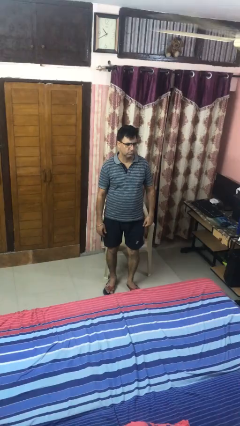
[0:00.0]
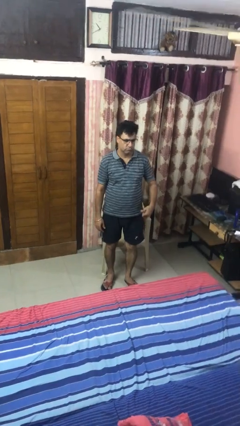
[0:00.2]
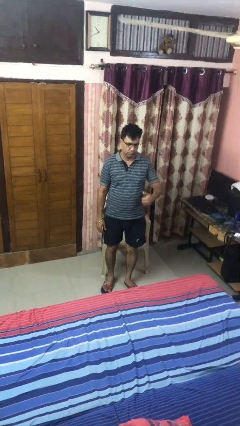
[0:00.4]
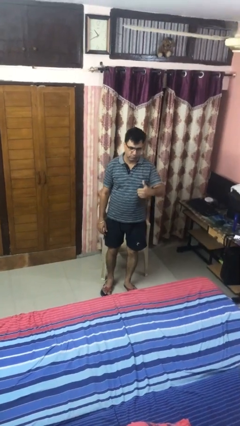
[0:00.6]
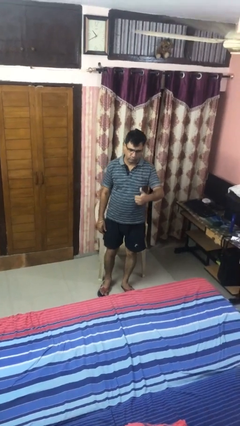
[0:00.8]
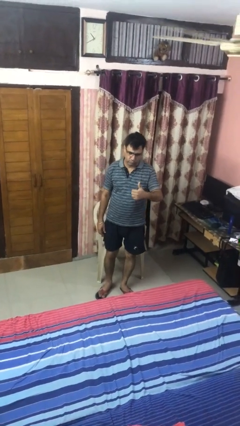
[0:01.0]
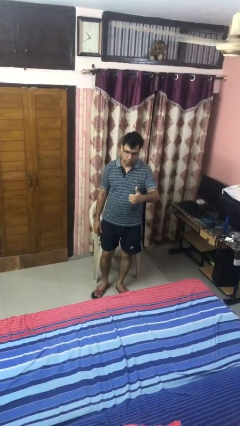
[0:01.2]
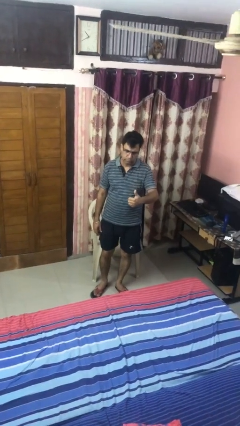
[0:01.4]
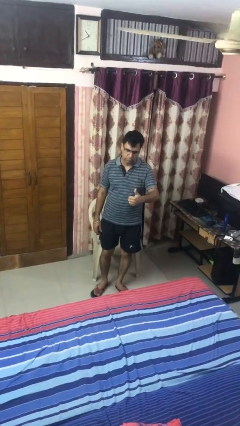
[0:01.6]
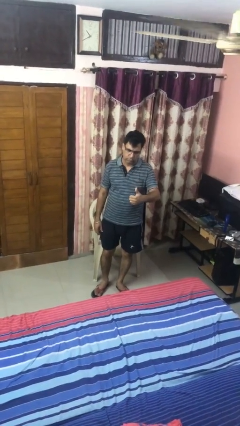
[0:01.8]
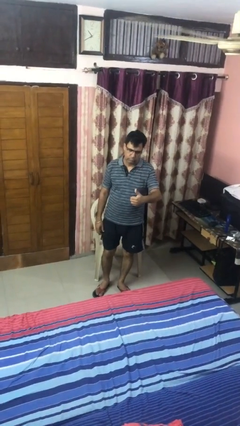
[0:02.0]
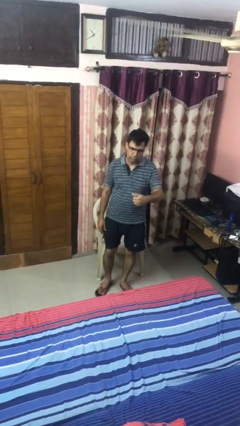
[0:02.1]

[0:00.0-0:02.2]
person gestures thumbs up

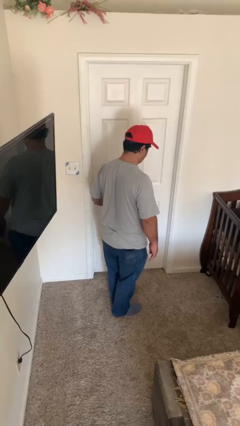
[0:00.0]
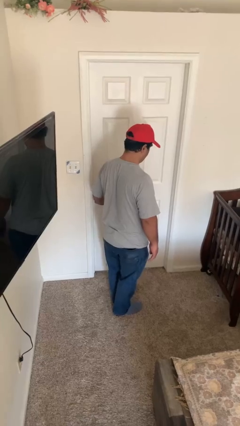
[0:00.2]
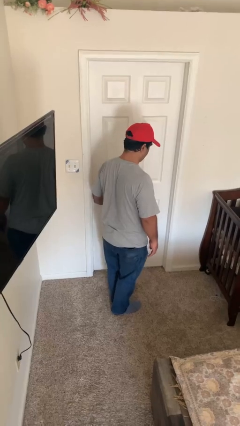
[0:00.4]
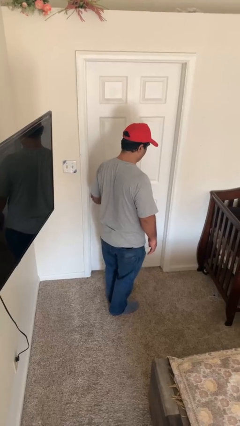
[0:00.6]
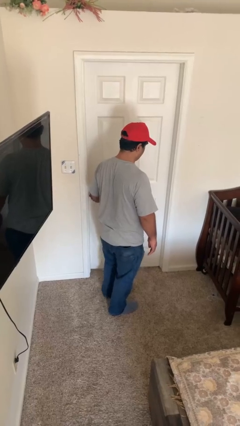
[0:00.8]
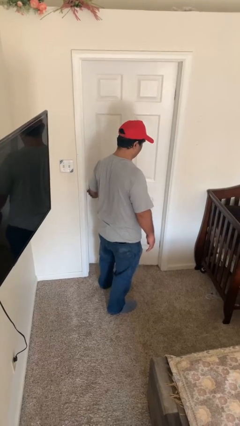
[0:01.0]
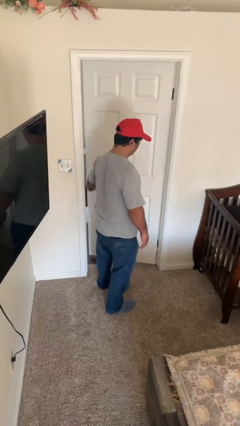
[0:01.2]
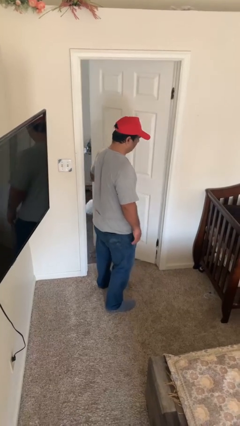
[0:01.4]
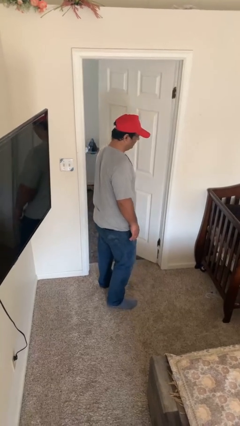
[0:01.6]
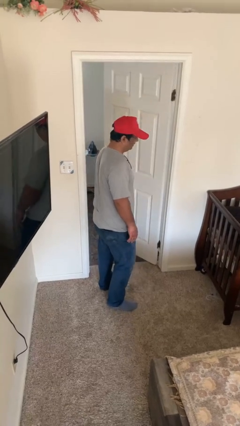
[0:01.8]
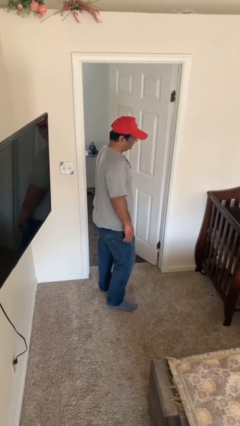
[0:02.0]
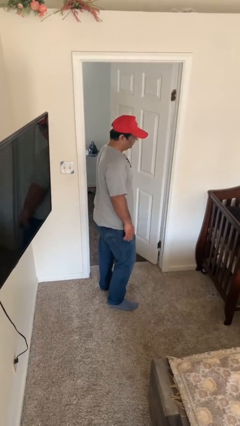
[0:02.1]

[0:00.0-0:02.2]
person opens facility door

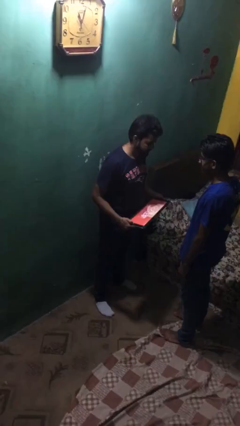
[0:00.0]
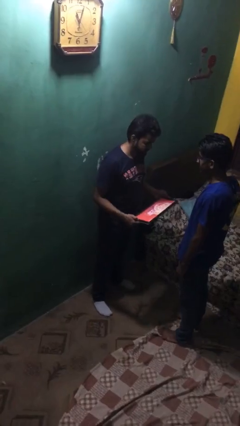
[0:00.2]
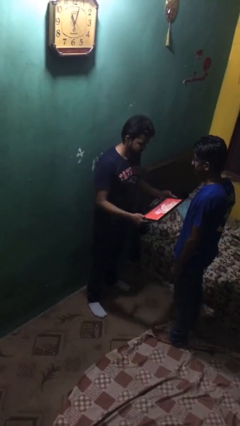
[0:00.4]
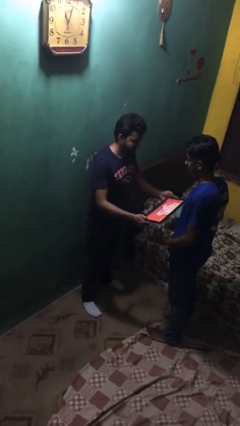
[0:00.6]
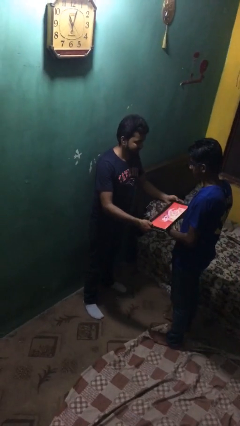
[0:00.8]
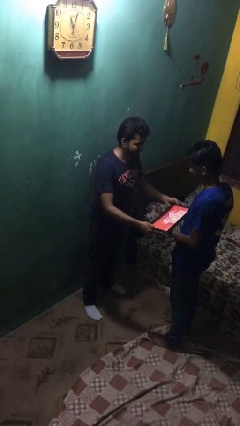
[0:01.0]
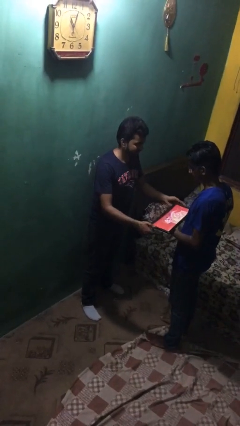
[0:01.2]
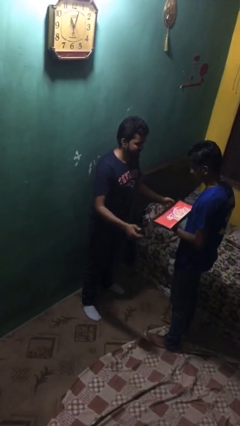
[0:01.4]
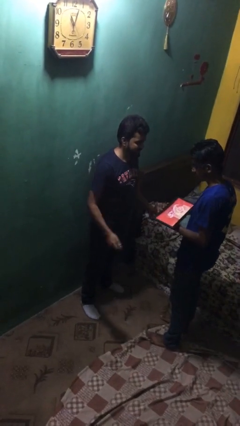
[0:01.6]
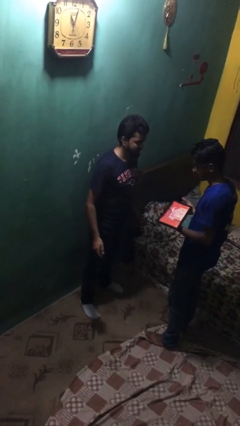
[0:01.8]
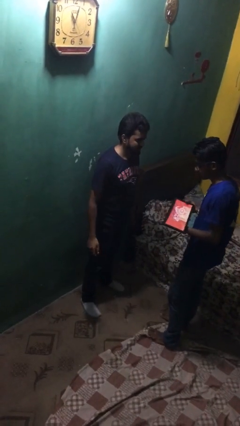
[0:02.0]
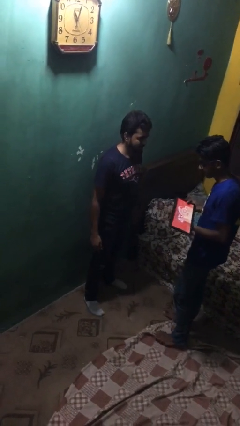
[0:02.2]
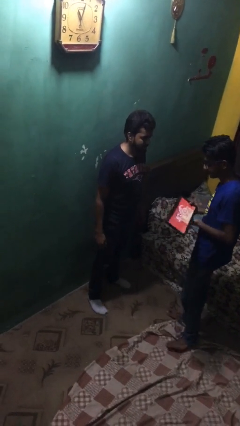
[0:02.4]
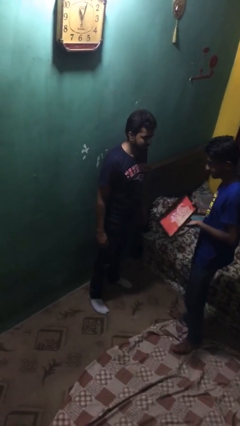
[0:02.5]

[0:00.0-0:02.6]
person transfers object to person

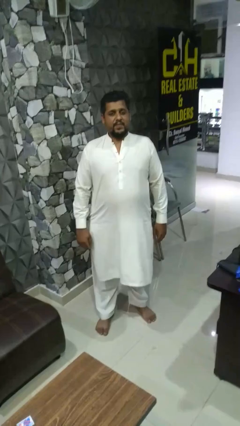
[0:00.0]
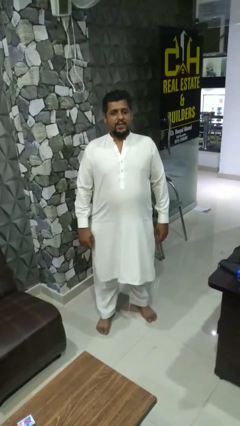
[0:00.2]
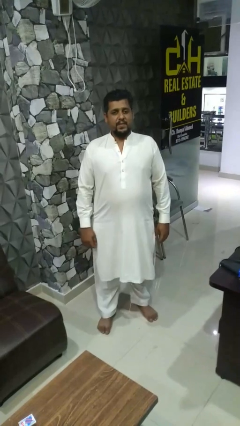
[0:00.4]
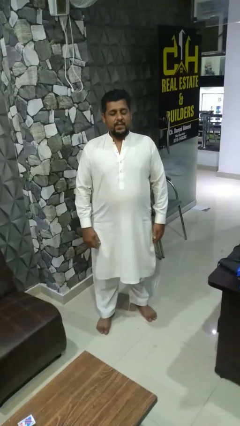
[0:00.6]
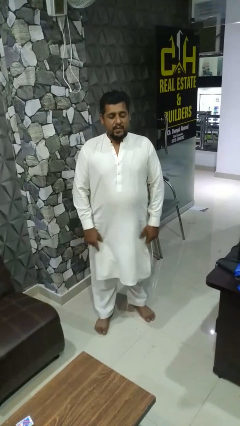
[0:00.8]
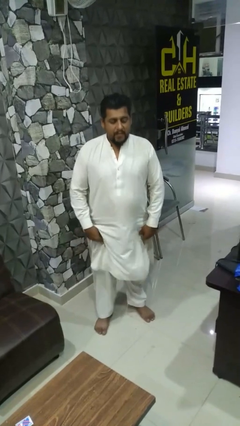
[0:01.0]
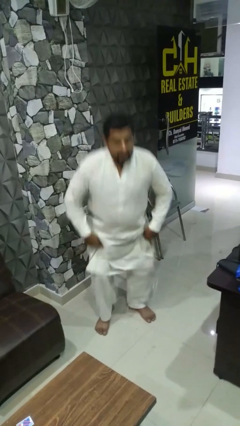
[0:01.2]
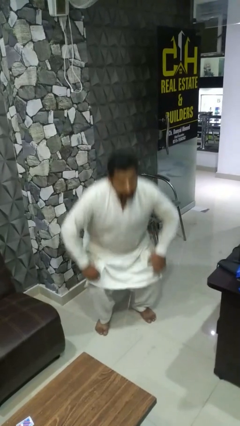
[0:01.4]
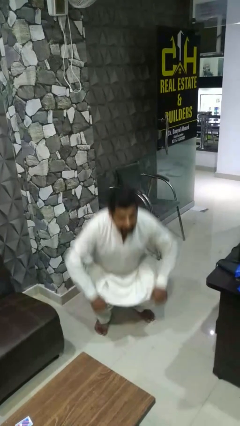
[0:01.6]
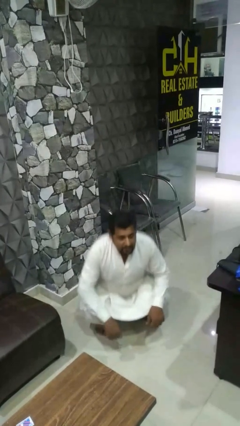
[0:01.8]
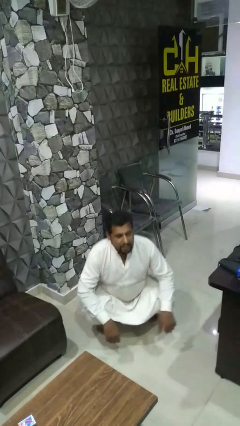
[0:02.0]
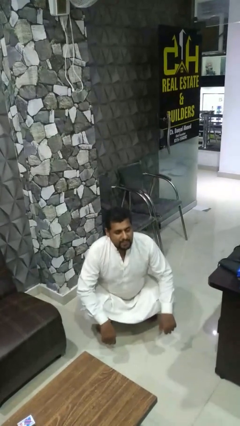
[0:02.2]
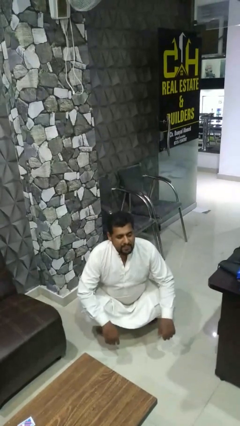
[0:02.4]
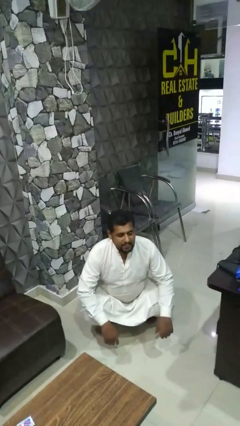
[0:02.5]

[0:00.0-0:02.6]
person squats

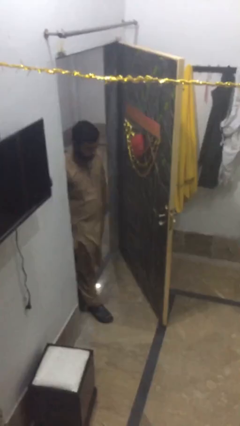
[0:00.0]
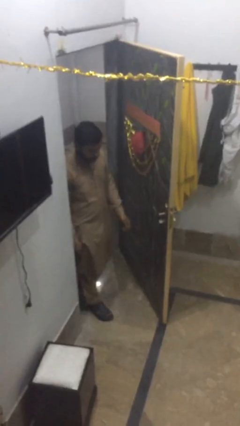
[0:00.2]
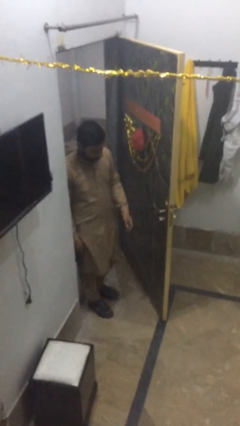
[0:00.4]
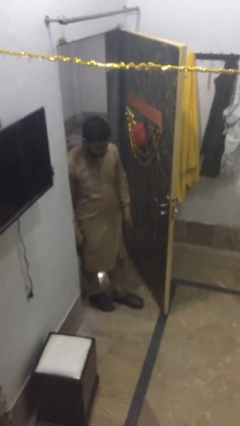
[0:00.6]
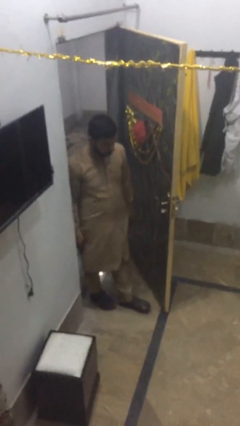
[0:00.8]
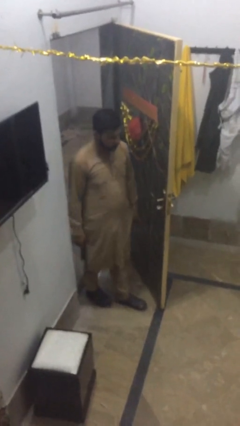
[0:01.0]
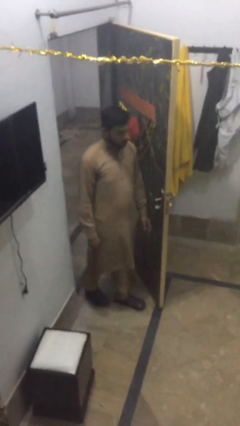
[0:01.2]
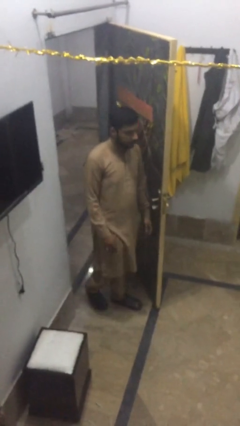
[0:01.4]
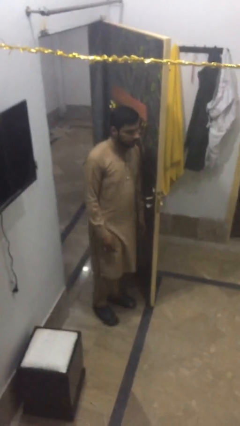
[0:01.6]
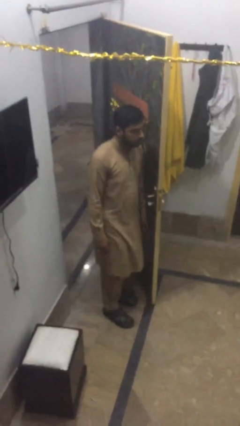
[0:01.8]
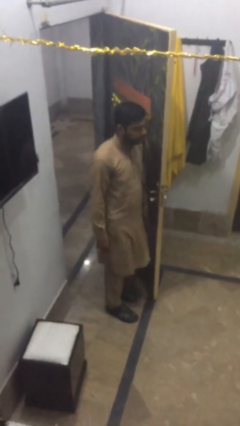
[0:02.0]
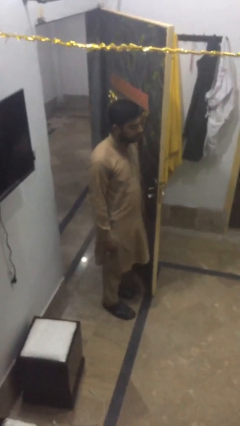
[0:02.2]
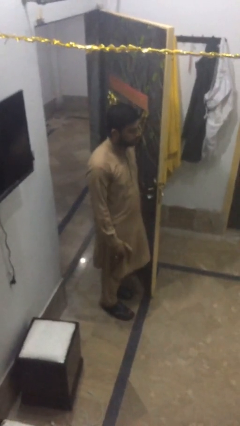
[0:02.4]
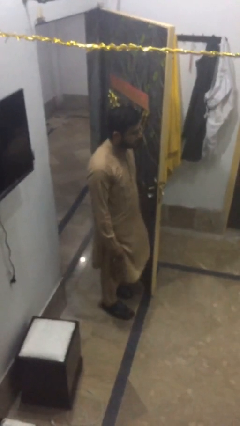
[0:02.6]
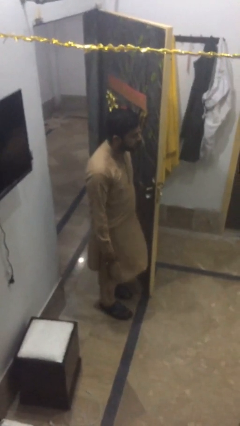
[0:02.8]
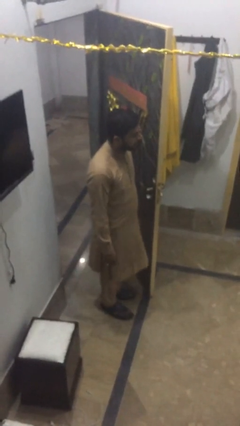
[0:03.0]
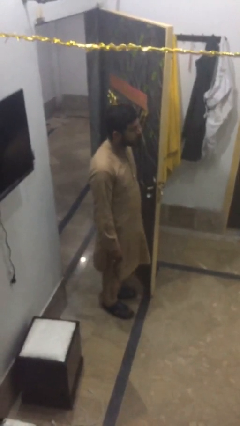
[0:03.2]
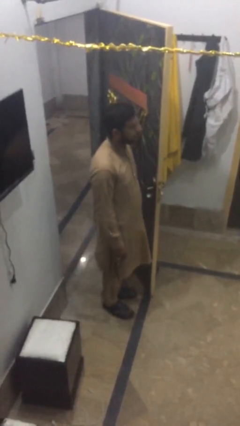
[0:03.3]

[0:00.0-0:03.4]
person enters scene through structure

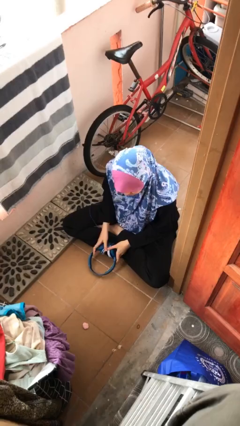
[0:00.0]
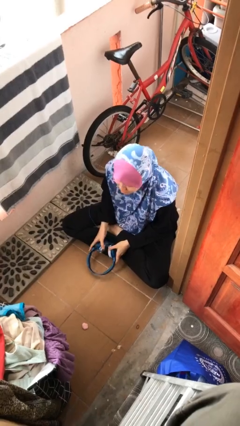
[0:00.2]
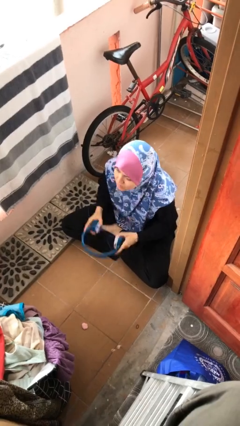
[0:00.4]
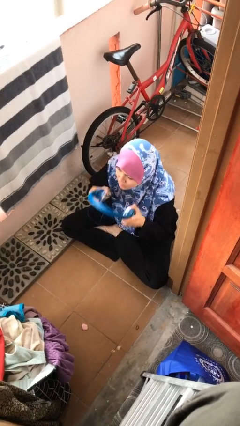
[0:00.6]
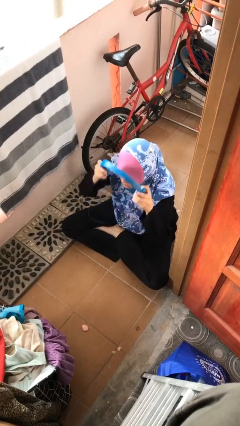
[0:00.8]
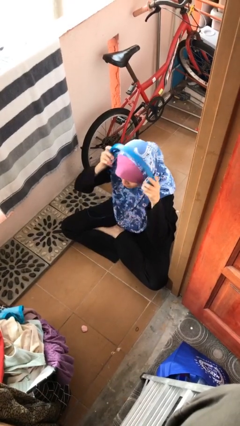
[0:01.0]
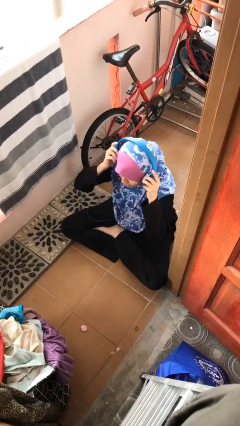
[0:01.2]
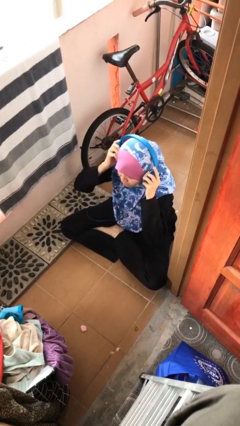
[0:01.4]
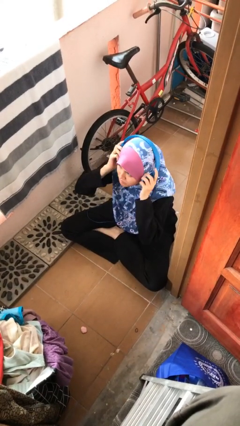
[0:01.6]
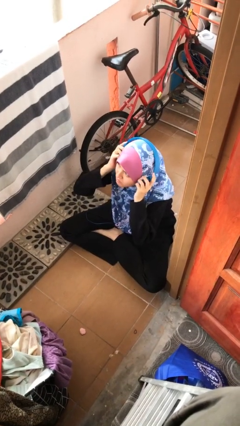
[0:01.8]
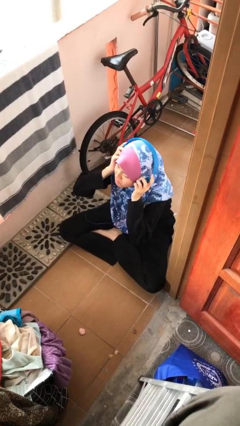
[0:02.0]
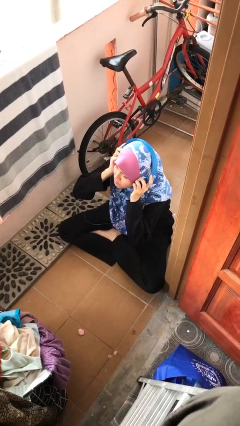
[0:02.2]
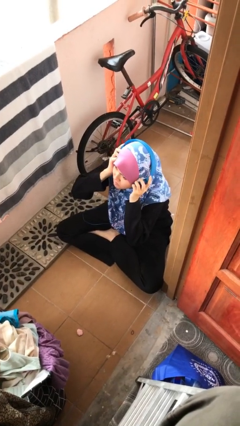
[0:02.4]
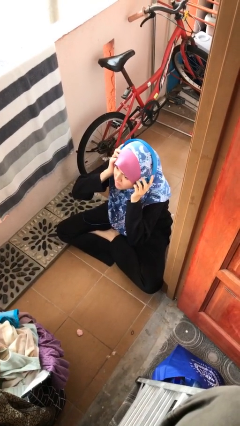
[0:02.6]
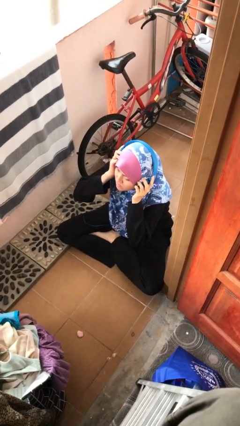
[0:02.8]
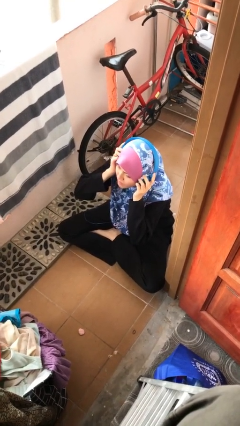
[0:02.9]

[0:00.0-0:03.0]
person puts on headphones

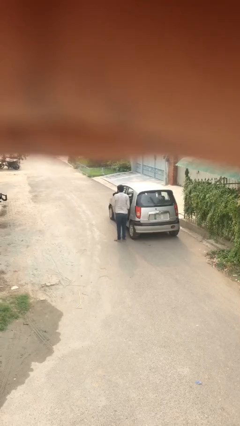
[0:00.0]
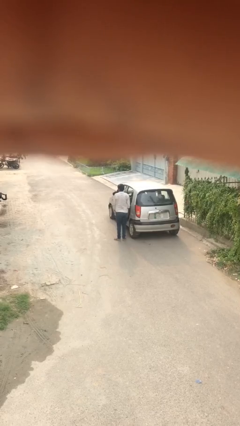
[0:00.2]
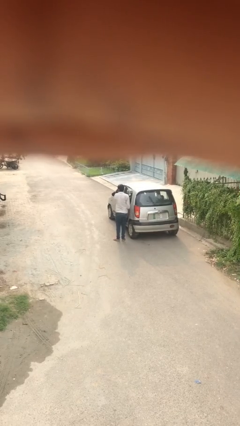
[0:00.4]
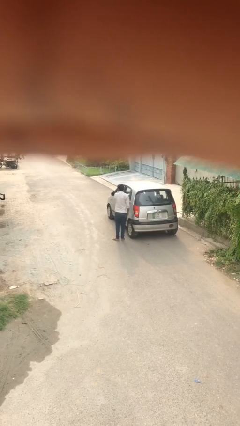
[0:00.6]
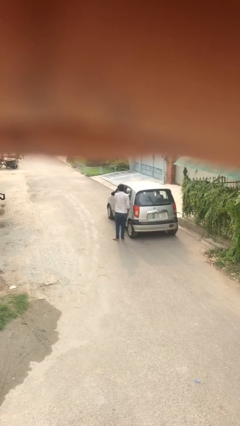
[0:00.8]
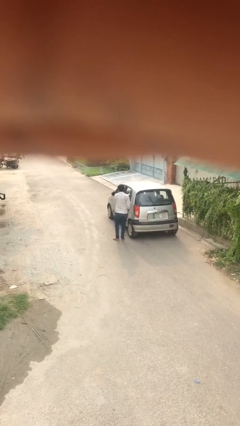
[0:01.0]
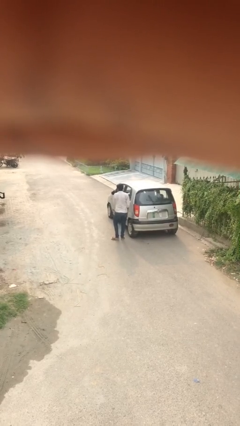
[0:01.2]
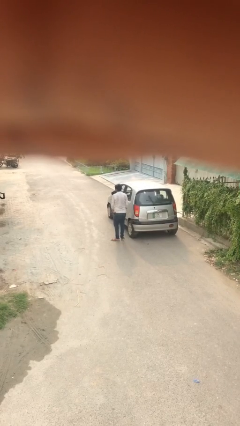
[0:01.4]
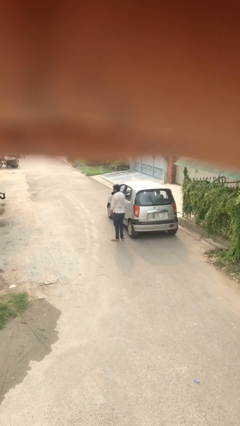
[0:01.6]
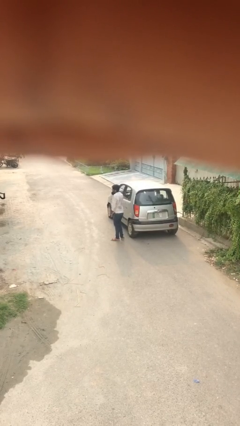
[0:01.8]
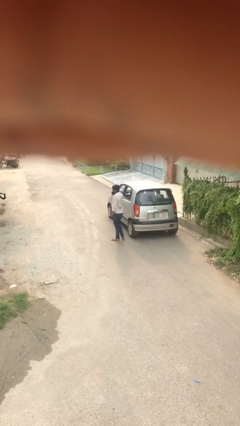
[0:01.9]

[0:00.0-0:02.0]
person closes car door
